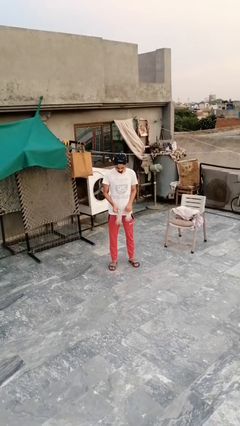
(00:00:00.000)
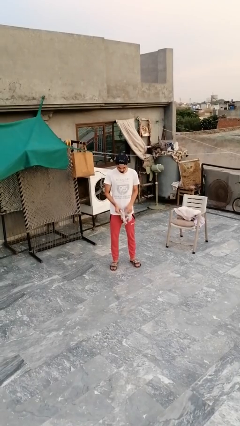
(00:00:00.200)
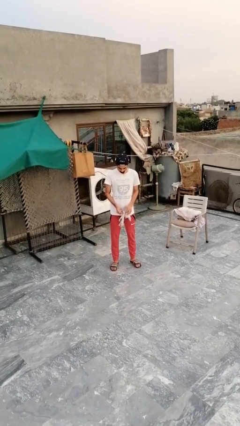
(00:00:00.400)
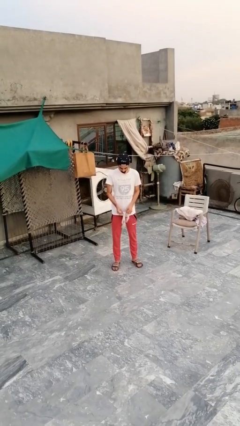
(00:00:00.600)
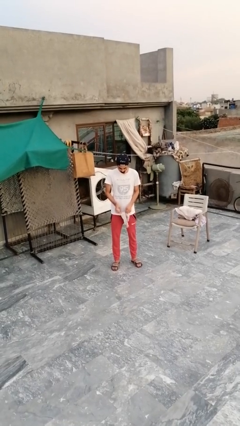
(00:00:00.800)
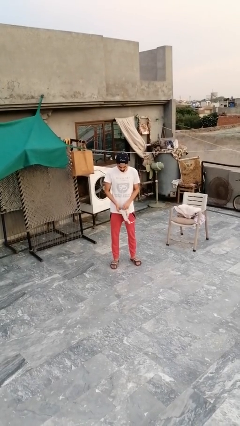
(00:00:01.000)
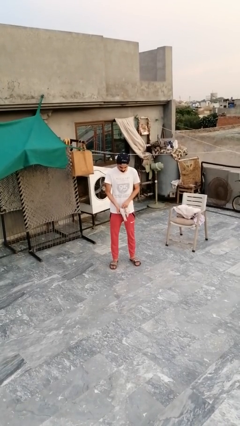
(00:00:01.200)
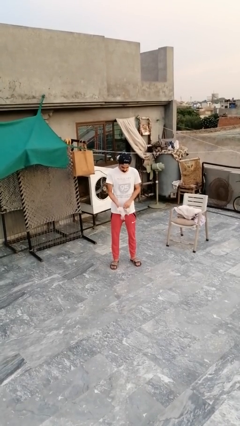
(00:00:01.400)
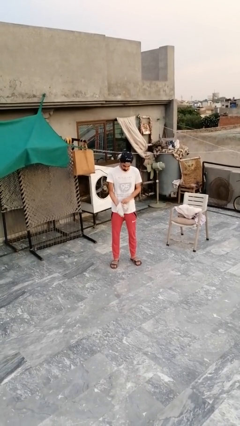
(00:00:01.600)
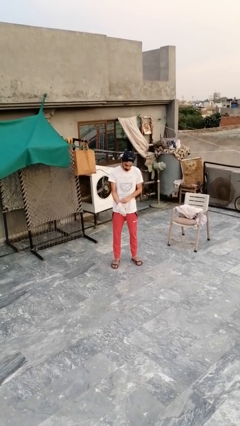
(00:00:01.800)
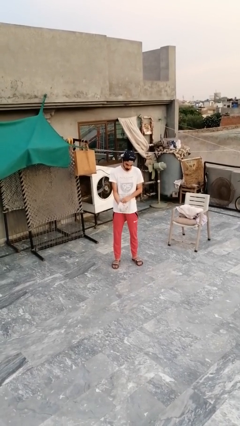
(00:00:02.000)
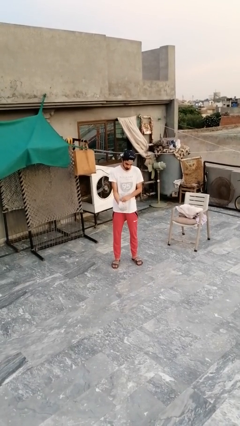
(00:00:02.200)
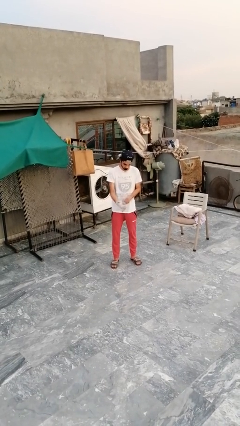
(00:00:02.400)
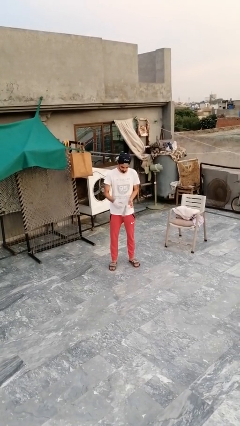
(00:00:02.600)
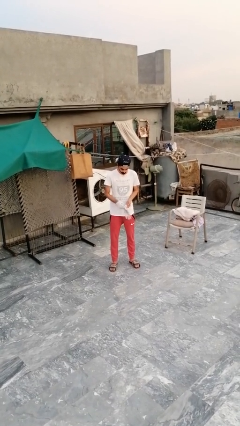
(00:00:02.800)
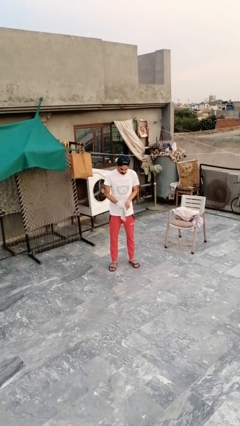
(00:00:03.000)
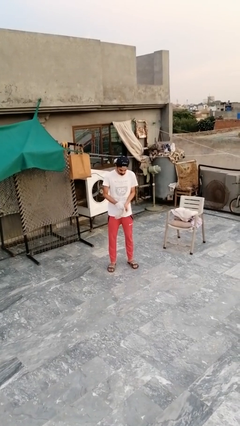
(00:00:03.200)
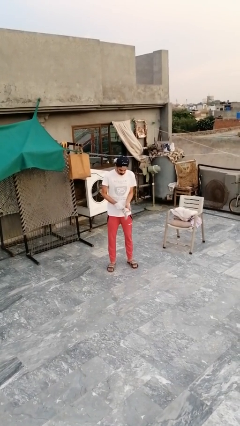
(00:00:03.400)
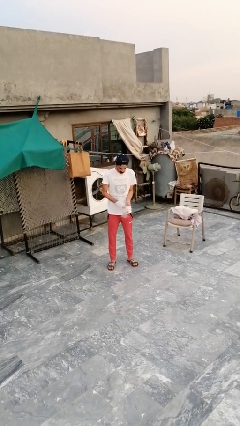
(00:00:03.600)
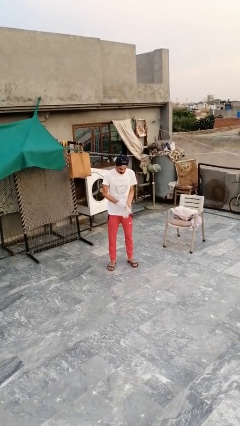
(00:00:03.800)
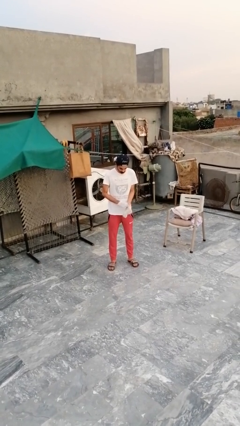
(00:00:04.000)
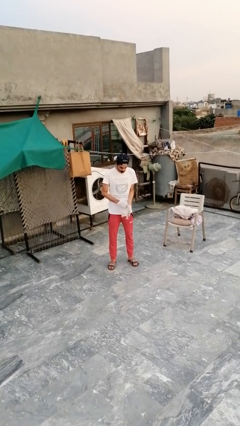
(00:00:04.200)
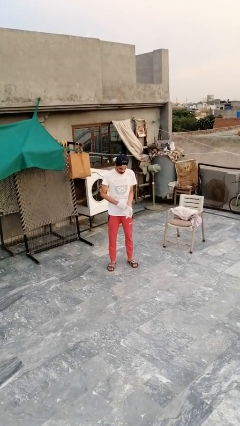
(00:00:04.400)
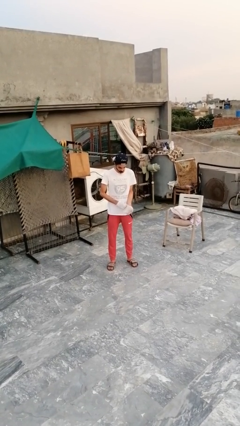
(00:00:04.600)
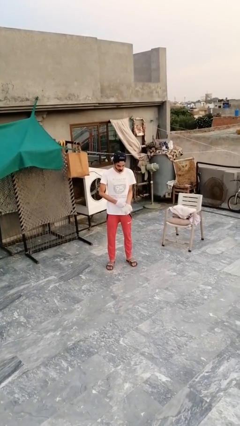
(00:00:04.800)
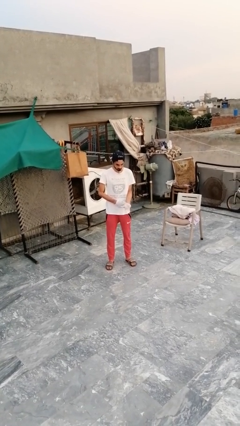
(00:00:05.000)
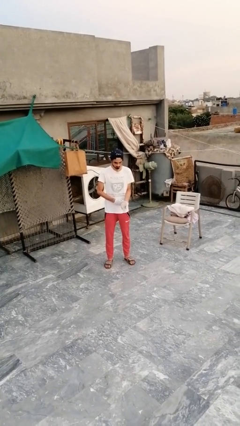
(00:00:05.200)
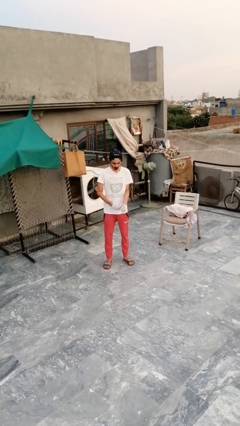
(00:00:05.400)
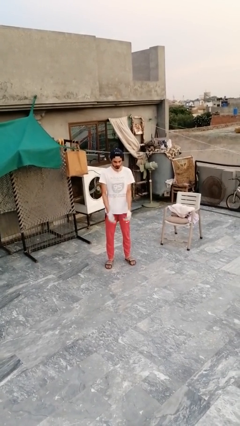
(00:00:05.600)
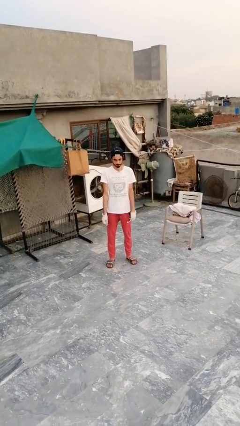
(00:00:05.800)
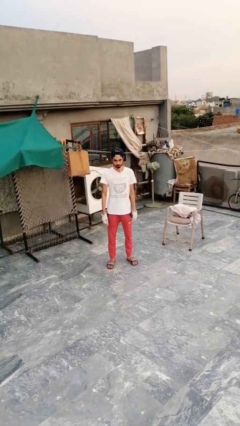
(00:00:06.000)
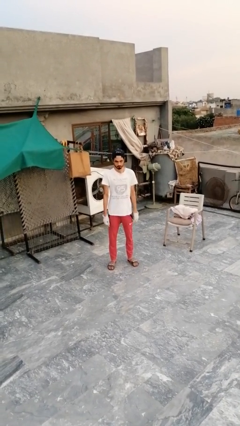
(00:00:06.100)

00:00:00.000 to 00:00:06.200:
person puts on gloves

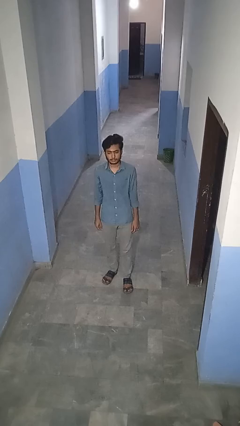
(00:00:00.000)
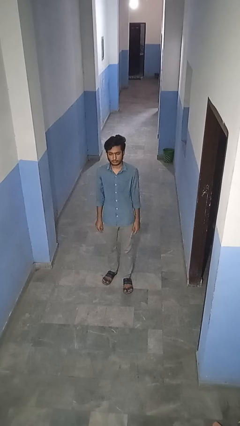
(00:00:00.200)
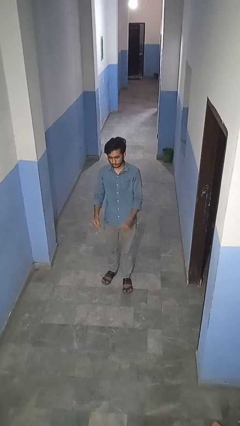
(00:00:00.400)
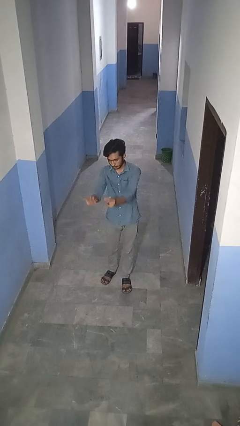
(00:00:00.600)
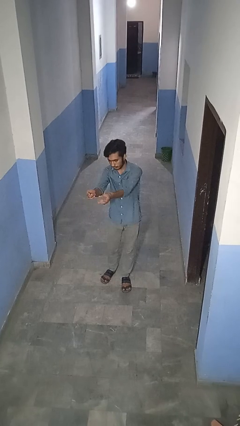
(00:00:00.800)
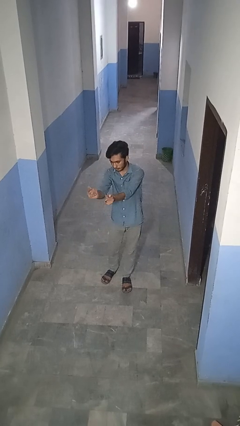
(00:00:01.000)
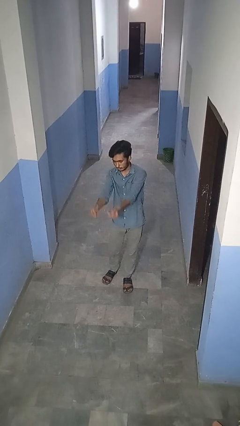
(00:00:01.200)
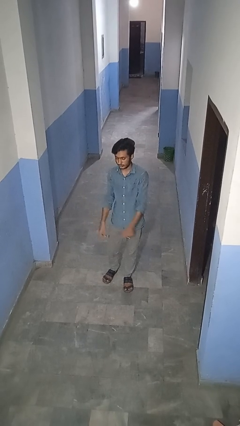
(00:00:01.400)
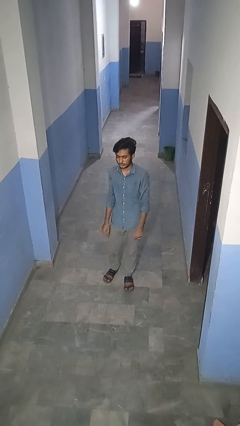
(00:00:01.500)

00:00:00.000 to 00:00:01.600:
person snaps fingers

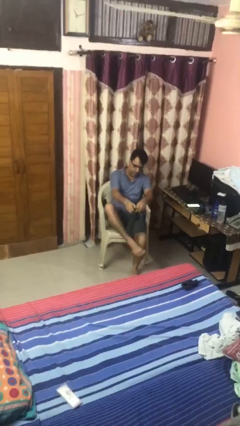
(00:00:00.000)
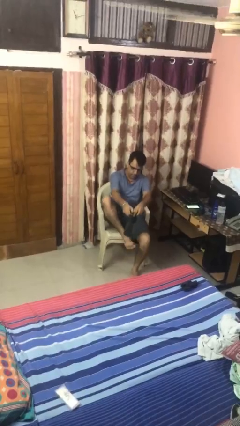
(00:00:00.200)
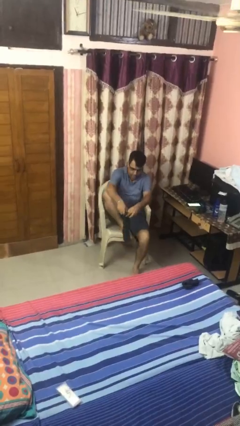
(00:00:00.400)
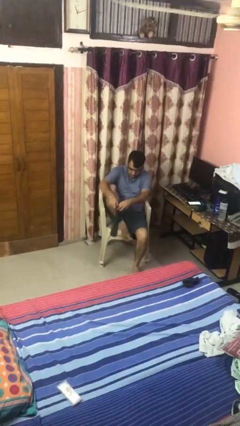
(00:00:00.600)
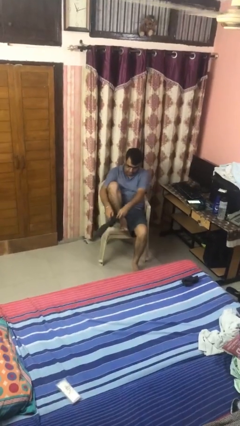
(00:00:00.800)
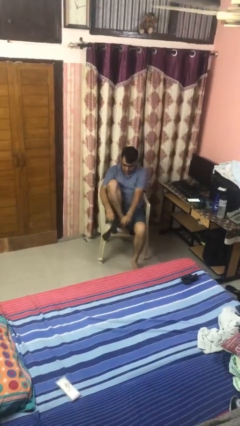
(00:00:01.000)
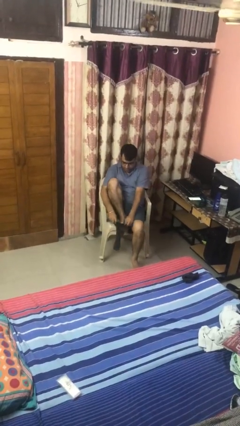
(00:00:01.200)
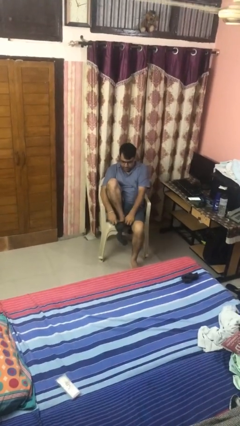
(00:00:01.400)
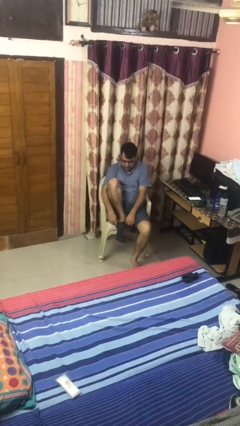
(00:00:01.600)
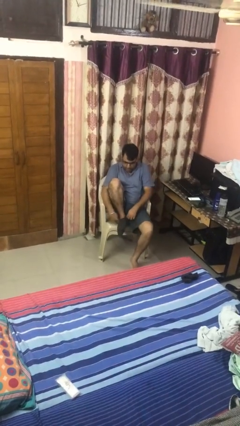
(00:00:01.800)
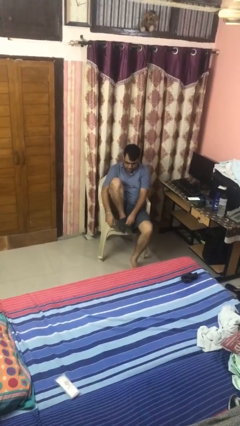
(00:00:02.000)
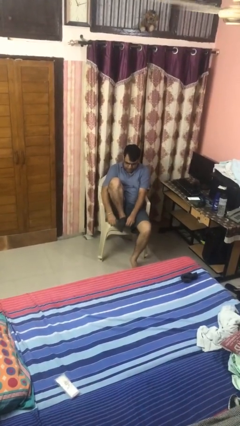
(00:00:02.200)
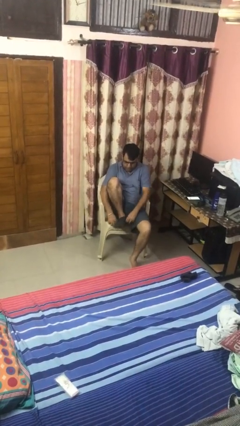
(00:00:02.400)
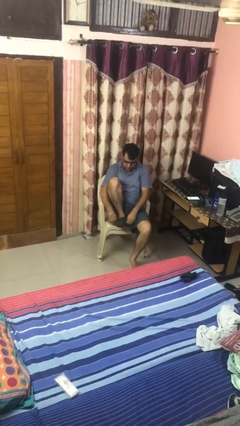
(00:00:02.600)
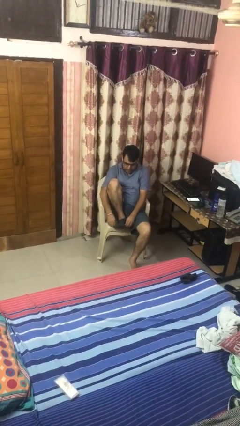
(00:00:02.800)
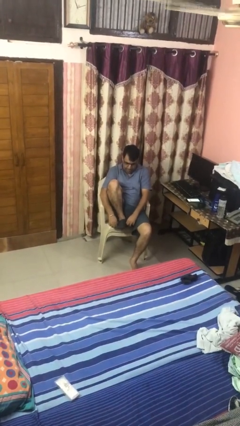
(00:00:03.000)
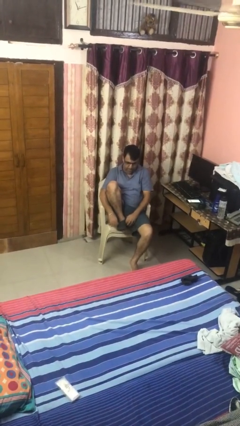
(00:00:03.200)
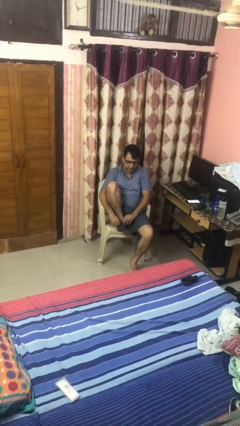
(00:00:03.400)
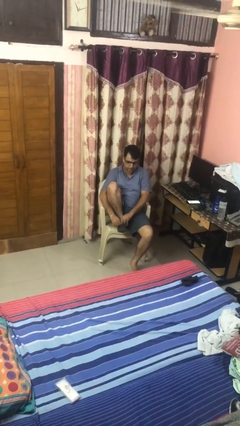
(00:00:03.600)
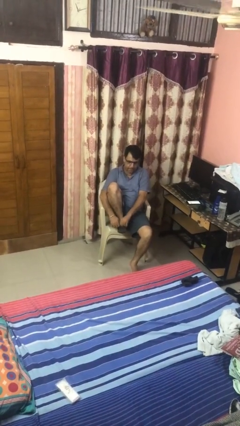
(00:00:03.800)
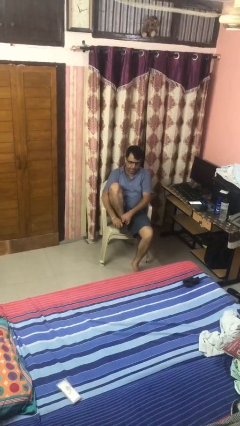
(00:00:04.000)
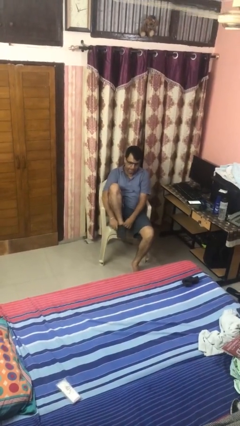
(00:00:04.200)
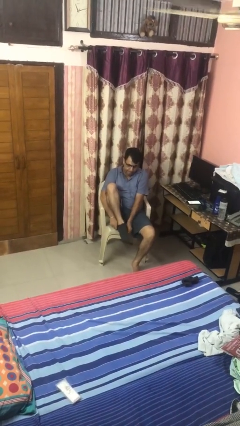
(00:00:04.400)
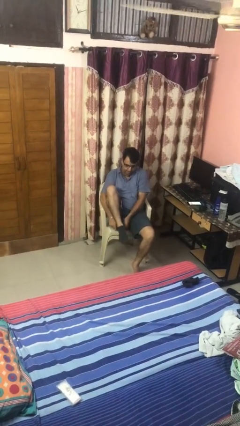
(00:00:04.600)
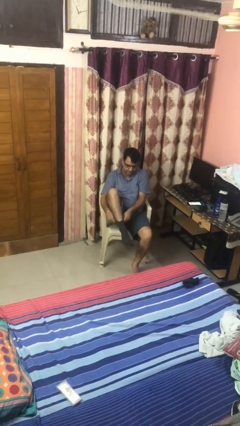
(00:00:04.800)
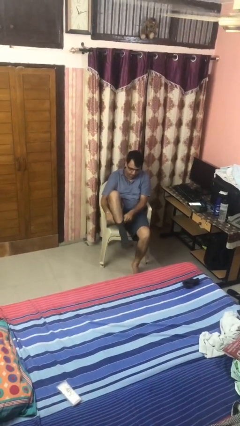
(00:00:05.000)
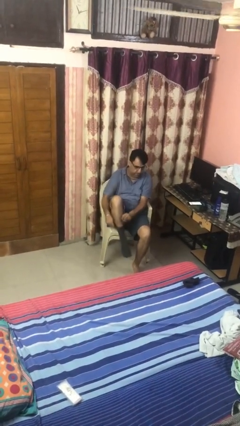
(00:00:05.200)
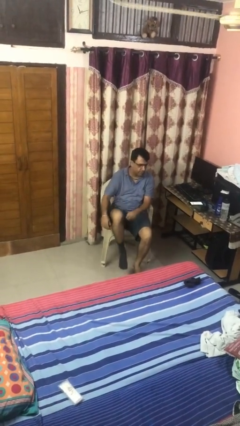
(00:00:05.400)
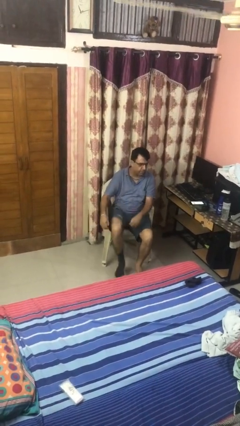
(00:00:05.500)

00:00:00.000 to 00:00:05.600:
person puts on socks

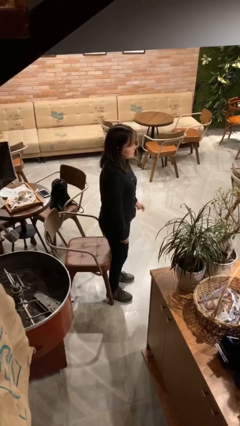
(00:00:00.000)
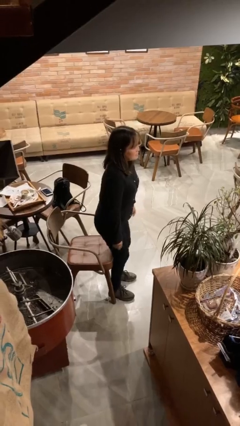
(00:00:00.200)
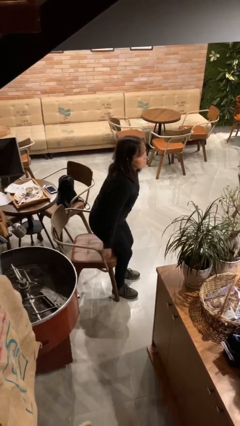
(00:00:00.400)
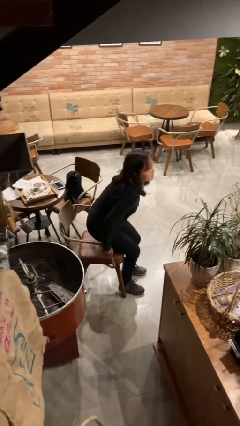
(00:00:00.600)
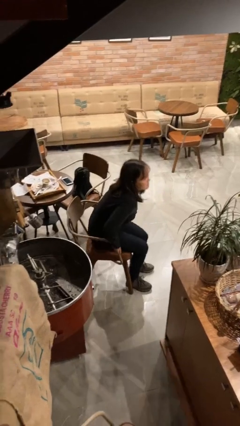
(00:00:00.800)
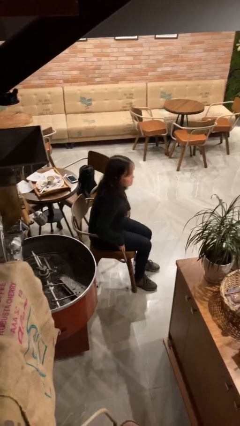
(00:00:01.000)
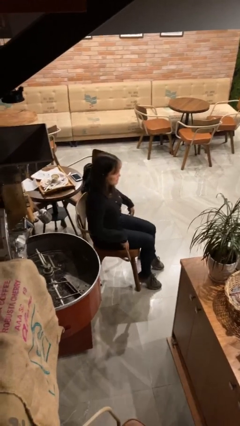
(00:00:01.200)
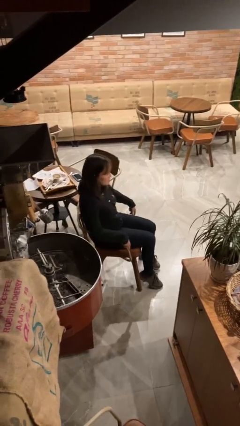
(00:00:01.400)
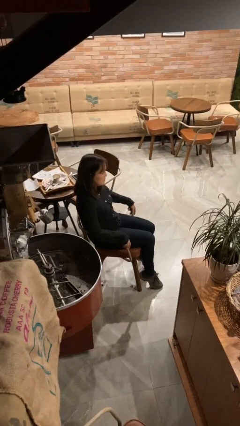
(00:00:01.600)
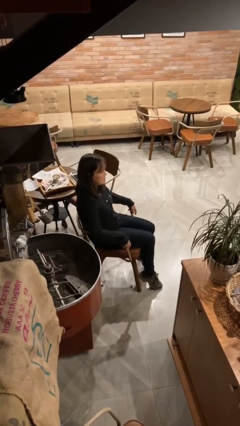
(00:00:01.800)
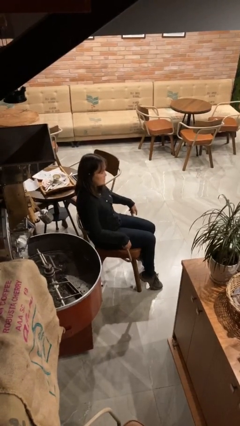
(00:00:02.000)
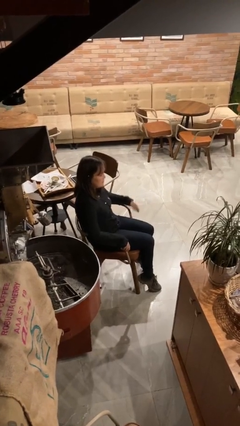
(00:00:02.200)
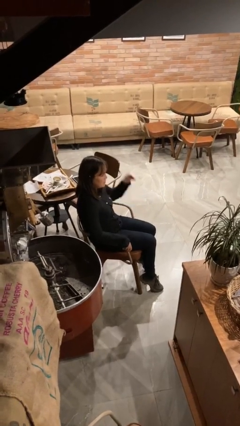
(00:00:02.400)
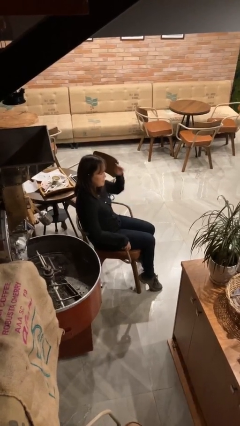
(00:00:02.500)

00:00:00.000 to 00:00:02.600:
person sits down

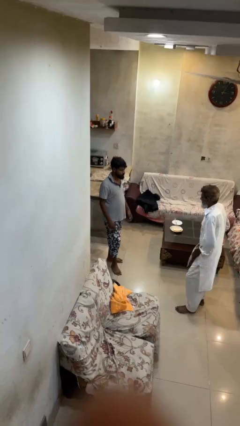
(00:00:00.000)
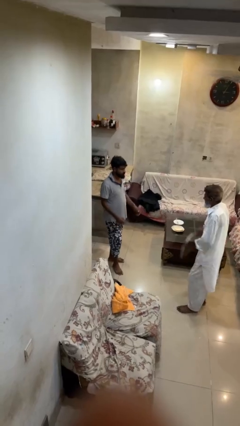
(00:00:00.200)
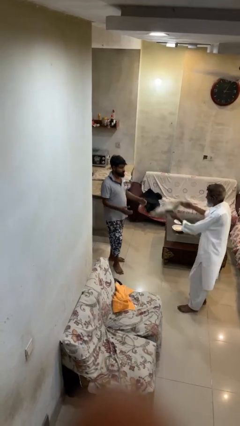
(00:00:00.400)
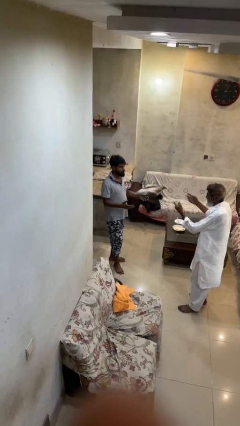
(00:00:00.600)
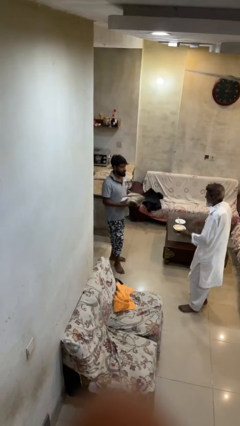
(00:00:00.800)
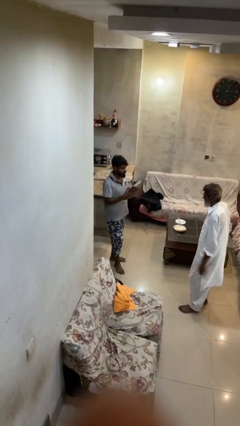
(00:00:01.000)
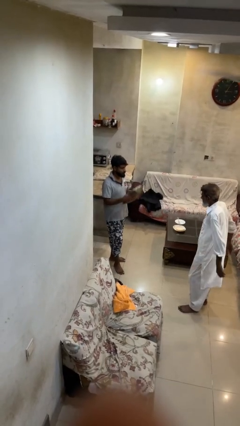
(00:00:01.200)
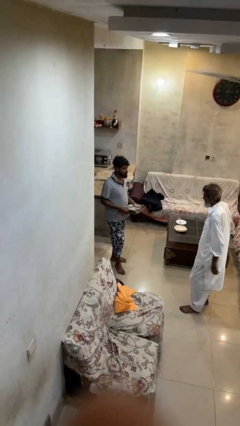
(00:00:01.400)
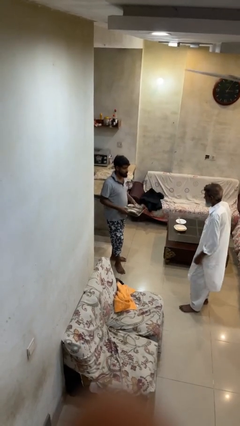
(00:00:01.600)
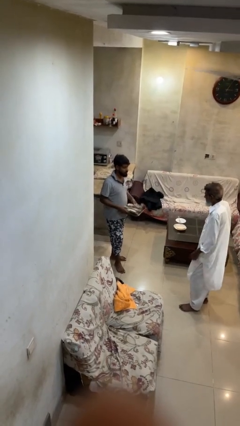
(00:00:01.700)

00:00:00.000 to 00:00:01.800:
person catches object from person
